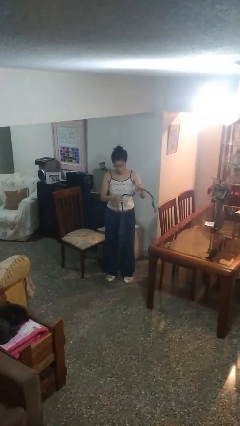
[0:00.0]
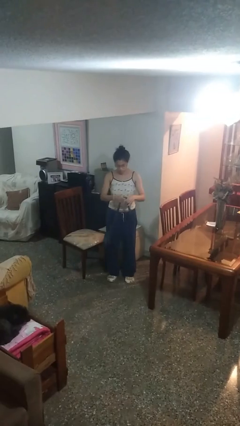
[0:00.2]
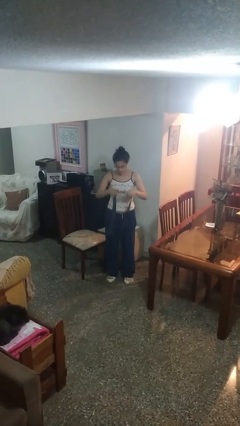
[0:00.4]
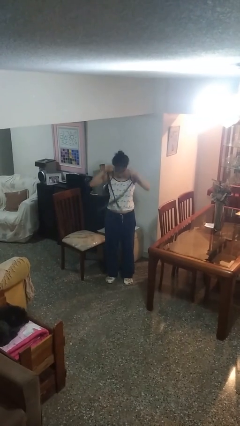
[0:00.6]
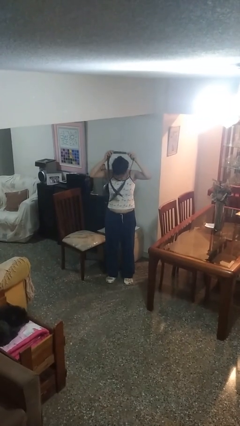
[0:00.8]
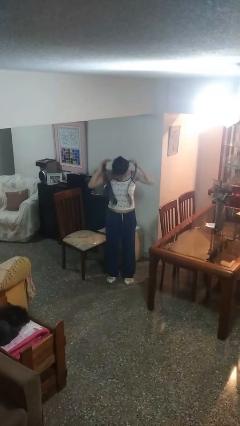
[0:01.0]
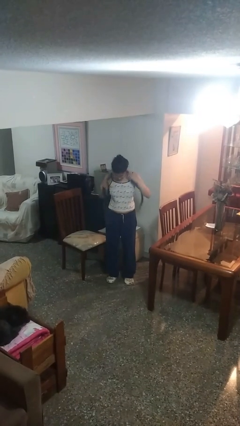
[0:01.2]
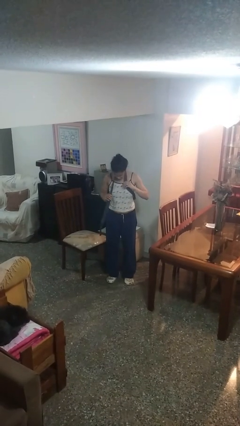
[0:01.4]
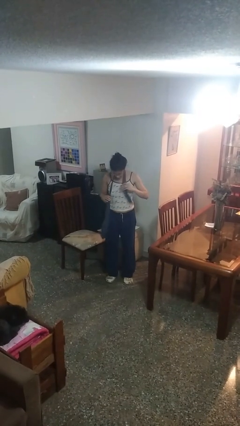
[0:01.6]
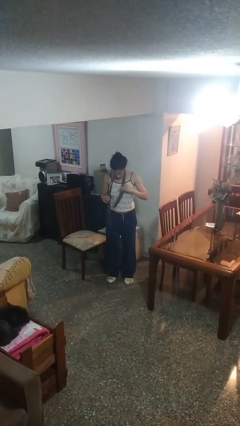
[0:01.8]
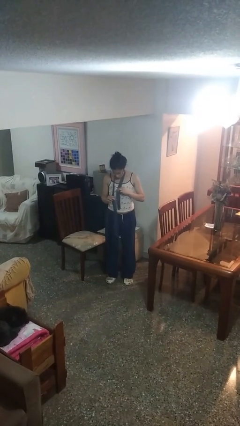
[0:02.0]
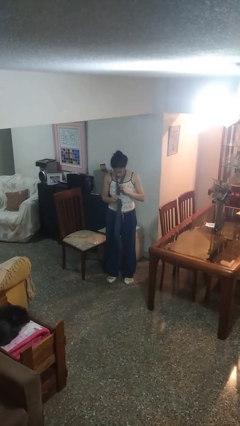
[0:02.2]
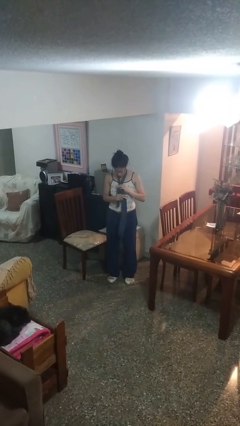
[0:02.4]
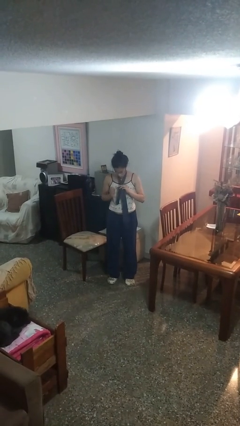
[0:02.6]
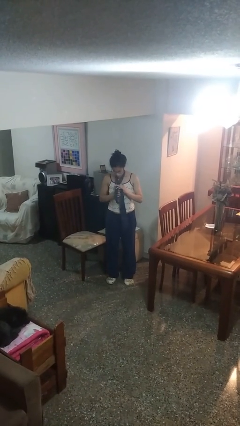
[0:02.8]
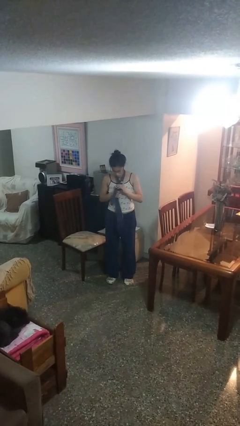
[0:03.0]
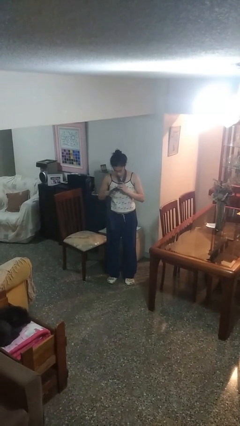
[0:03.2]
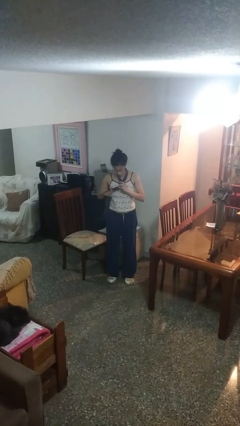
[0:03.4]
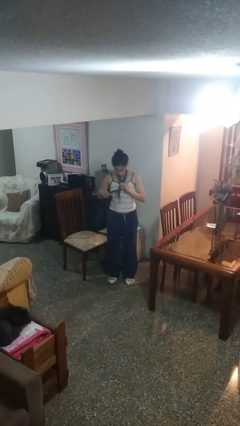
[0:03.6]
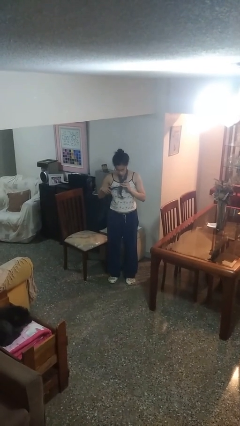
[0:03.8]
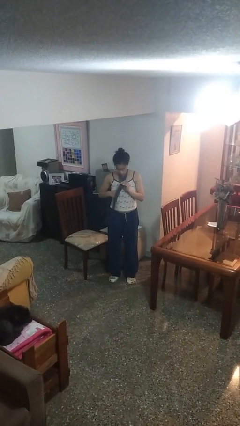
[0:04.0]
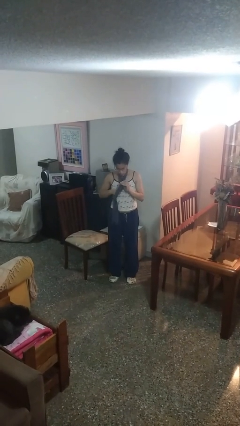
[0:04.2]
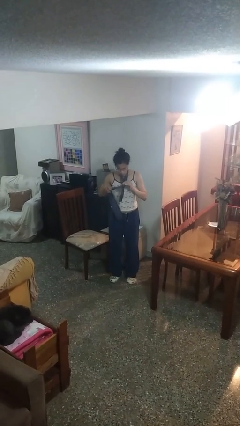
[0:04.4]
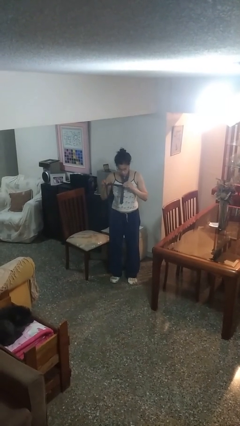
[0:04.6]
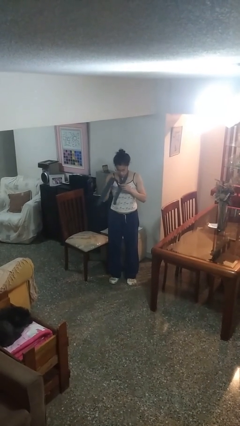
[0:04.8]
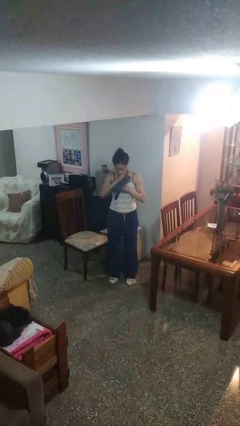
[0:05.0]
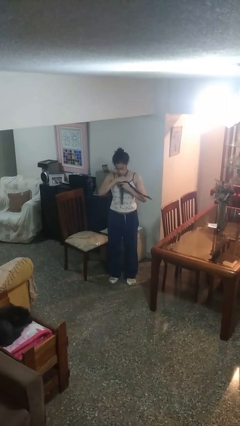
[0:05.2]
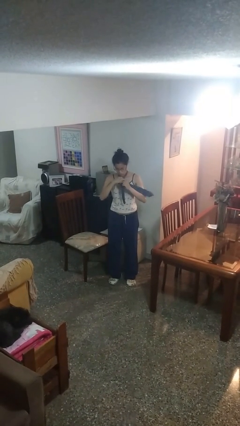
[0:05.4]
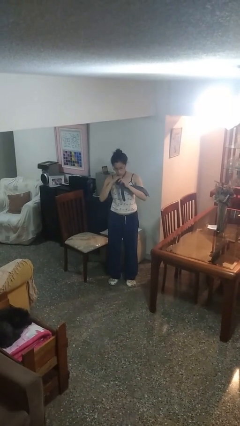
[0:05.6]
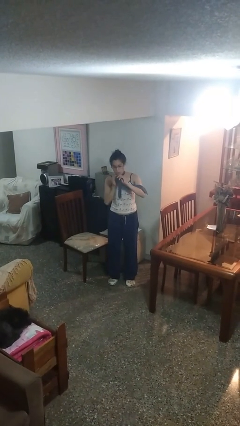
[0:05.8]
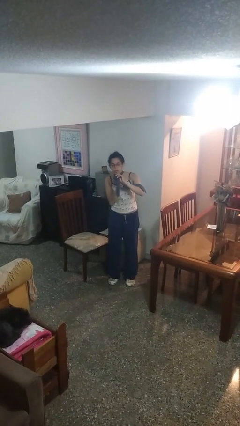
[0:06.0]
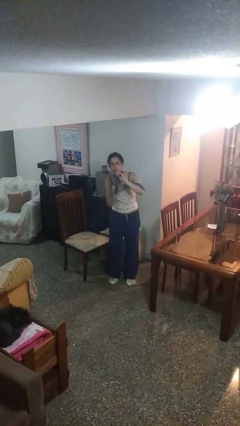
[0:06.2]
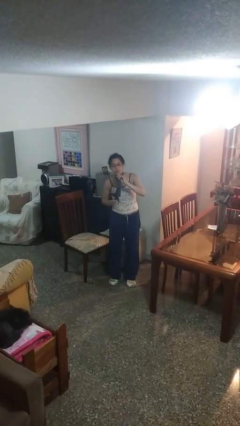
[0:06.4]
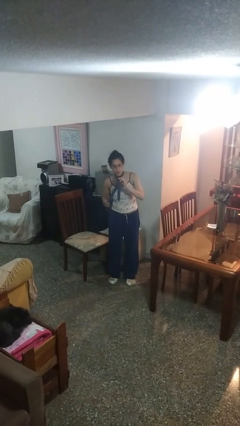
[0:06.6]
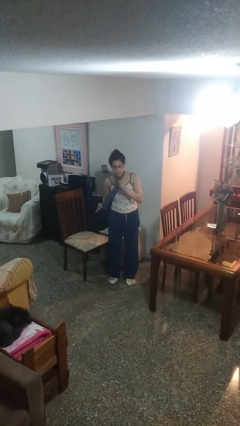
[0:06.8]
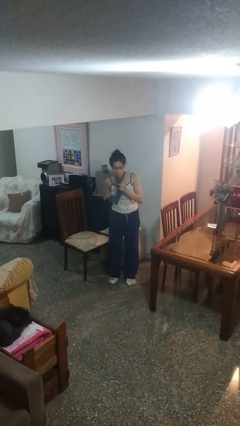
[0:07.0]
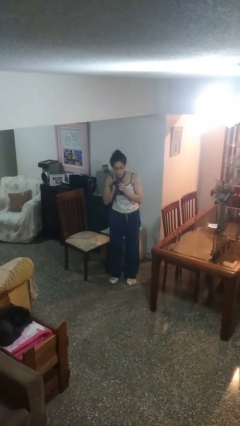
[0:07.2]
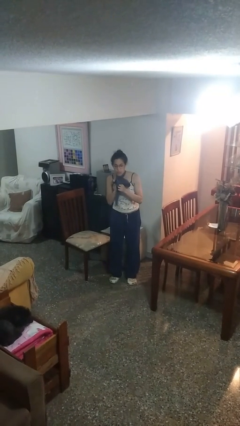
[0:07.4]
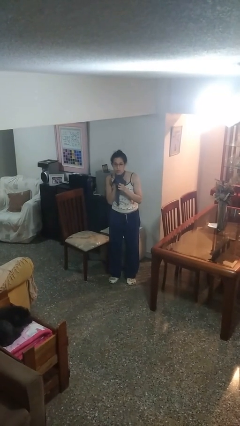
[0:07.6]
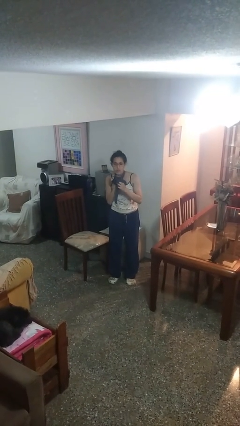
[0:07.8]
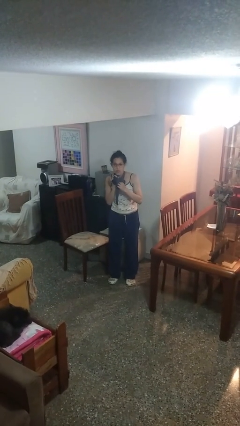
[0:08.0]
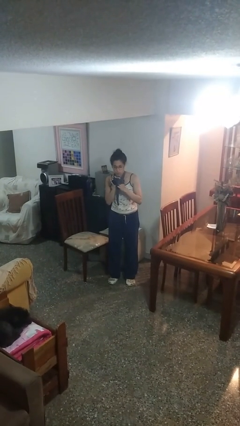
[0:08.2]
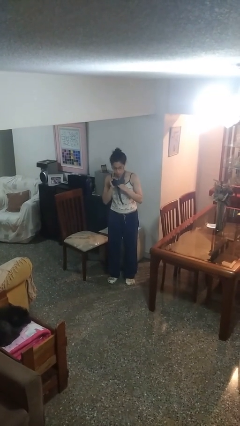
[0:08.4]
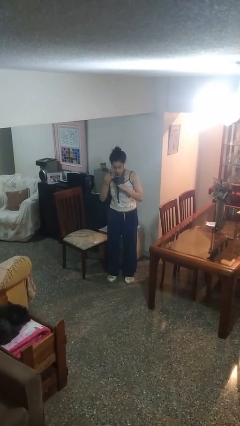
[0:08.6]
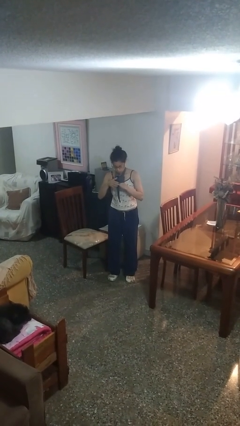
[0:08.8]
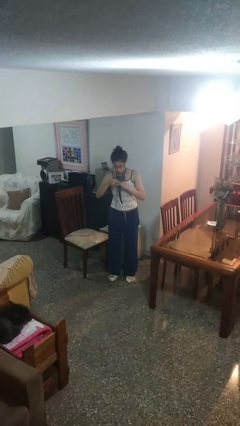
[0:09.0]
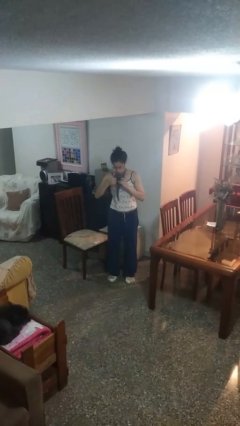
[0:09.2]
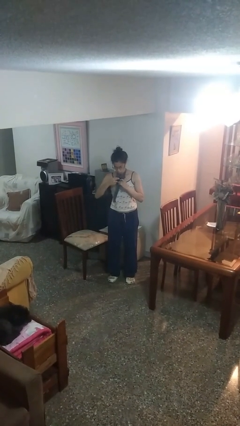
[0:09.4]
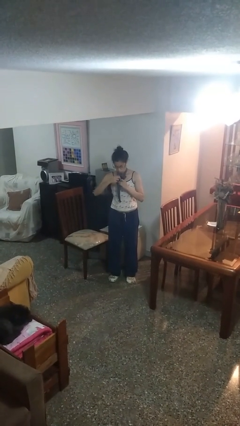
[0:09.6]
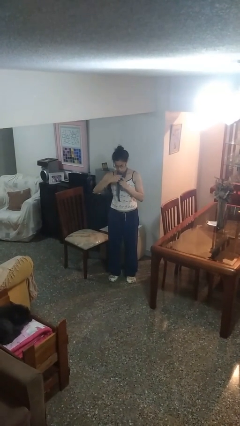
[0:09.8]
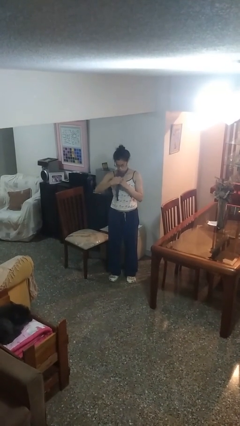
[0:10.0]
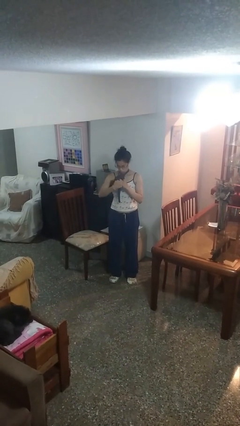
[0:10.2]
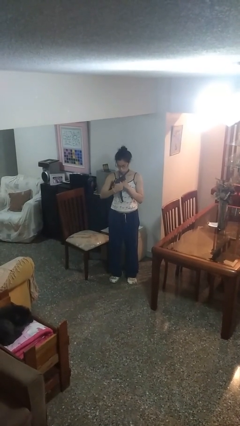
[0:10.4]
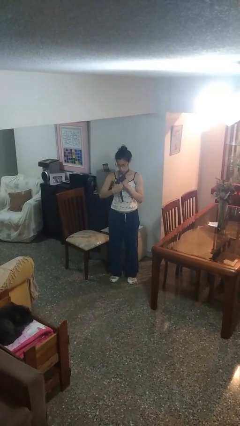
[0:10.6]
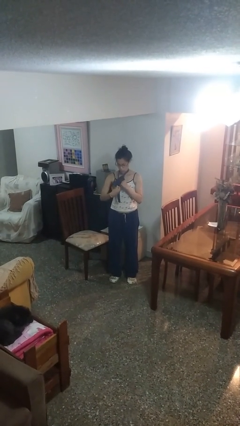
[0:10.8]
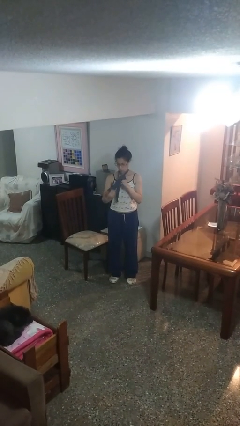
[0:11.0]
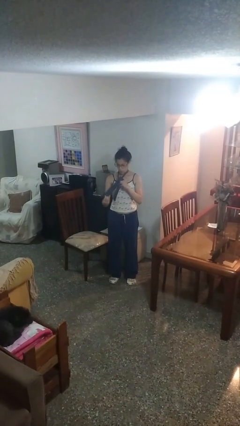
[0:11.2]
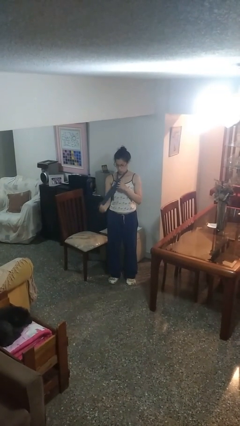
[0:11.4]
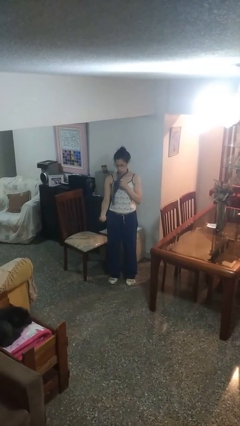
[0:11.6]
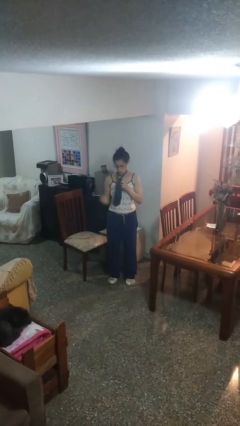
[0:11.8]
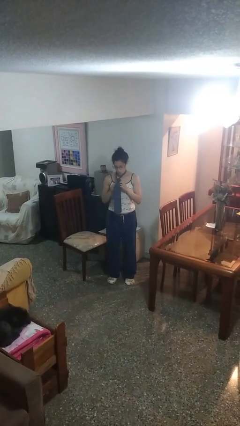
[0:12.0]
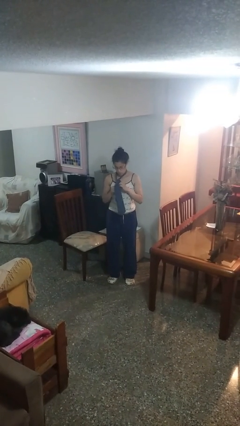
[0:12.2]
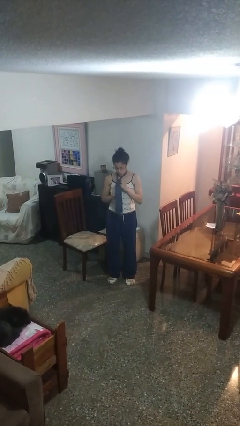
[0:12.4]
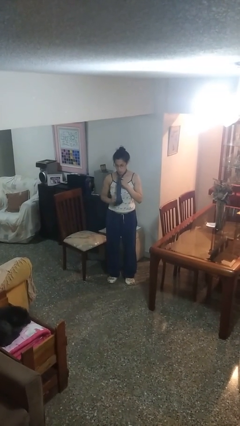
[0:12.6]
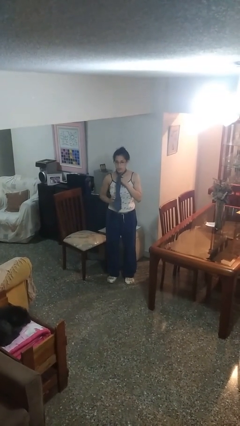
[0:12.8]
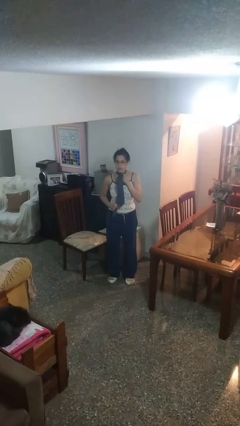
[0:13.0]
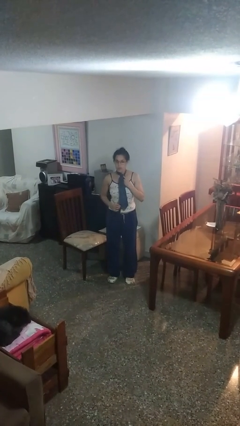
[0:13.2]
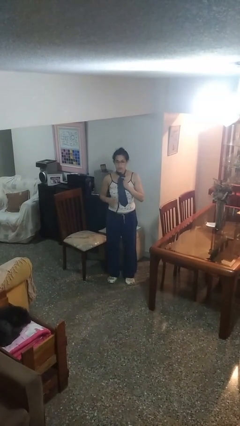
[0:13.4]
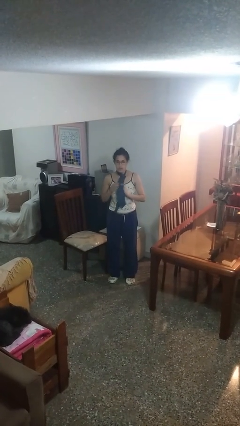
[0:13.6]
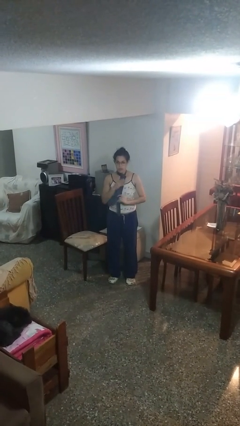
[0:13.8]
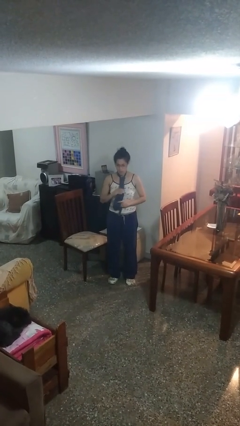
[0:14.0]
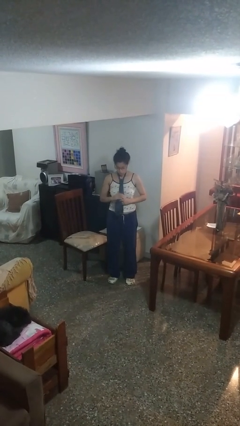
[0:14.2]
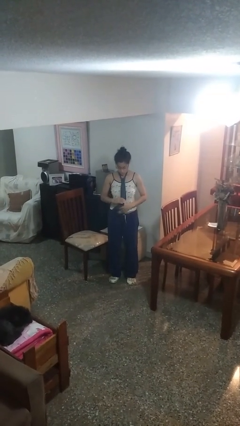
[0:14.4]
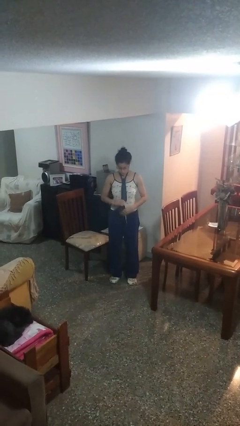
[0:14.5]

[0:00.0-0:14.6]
person puts on necktie

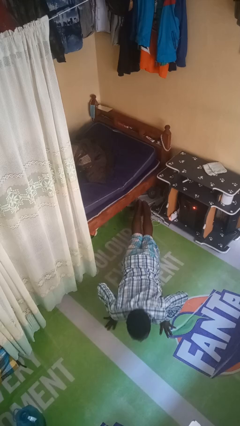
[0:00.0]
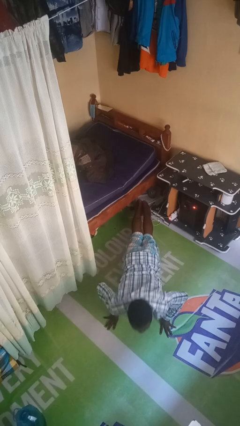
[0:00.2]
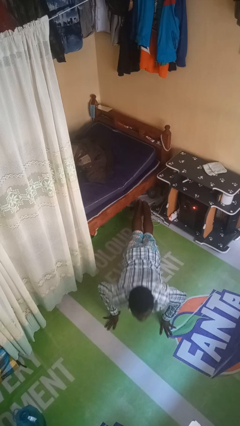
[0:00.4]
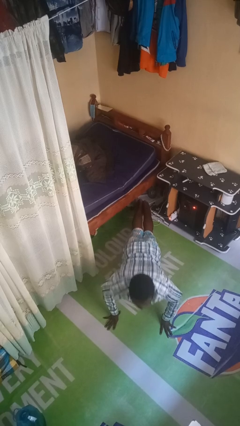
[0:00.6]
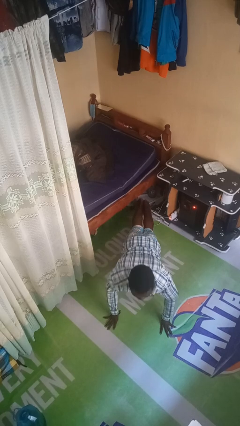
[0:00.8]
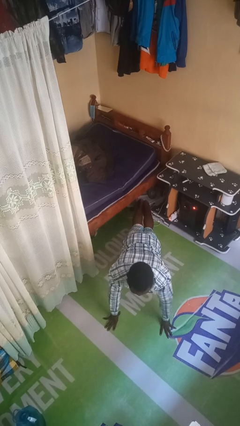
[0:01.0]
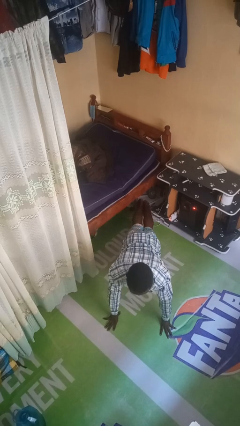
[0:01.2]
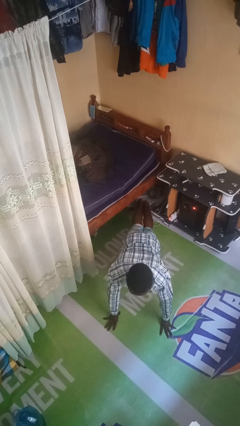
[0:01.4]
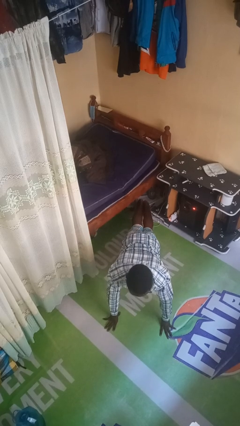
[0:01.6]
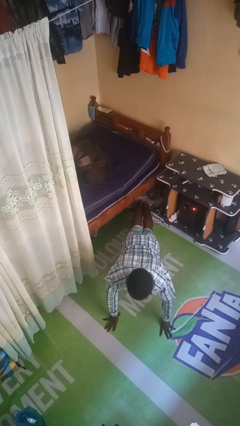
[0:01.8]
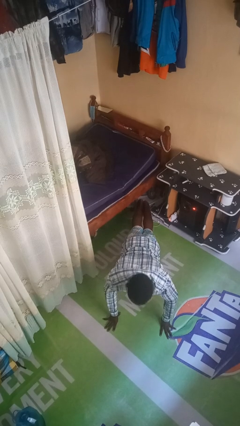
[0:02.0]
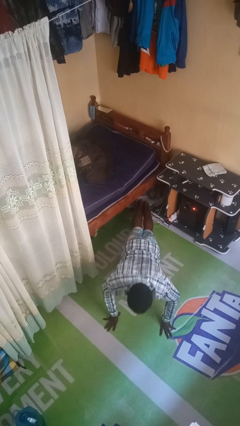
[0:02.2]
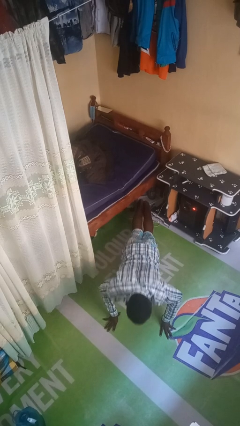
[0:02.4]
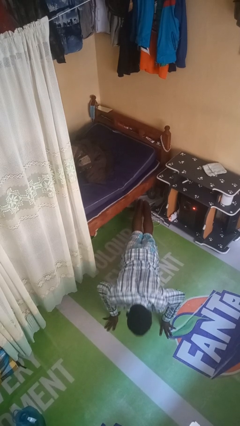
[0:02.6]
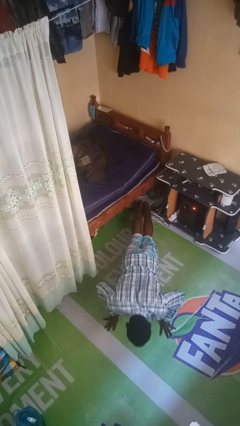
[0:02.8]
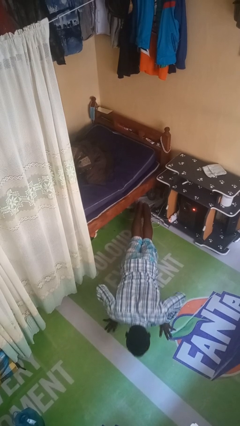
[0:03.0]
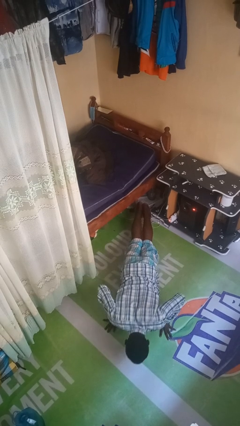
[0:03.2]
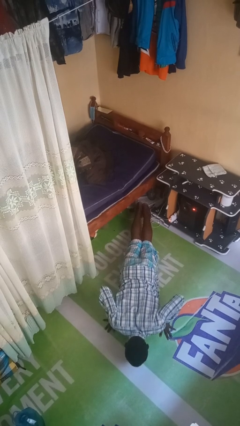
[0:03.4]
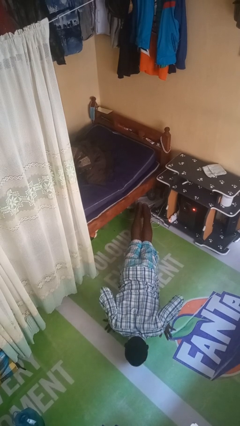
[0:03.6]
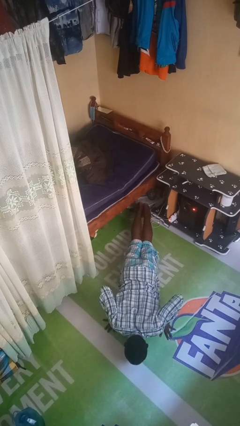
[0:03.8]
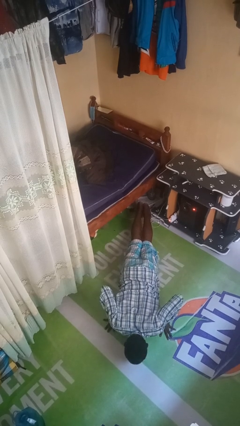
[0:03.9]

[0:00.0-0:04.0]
person exercises with pushup
